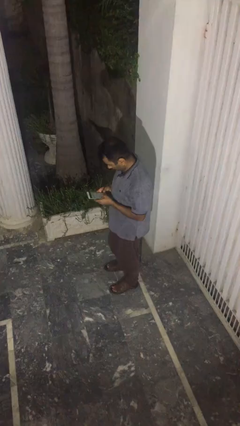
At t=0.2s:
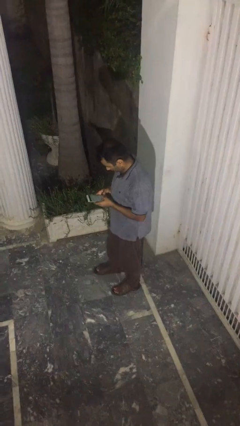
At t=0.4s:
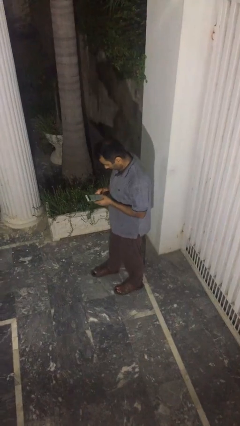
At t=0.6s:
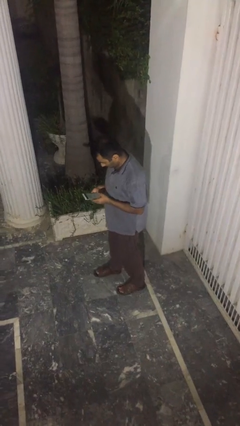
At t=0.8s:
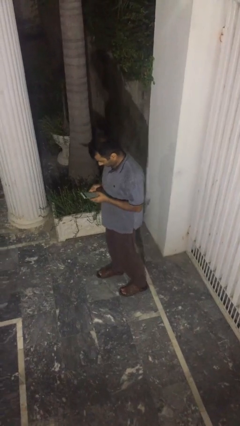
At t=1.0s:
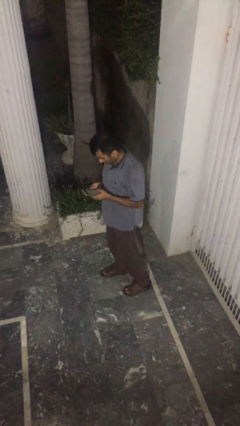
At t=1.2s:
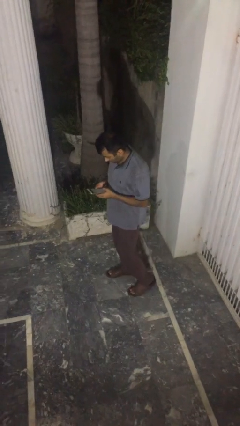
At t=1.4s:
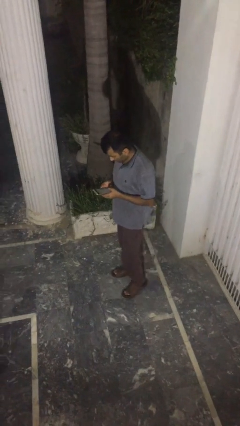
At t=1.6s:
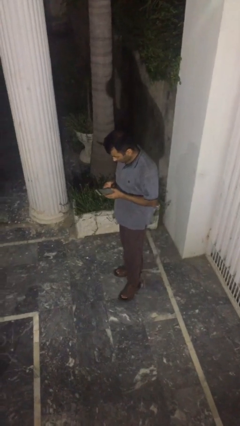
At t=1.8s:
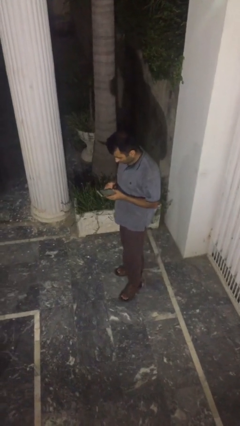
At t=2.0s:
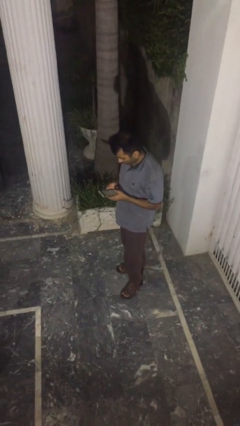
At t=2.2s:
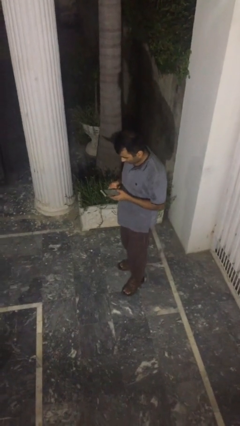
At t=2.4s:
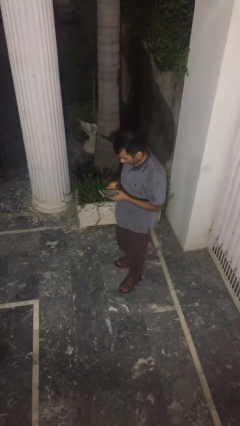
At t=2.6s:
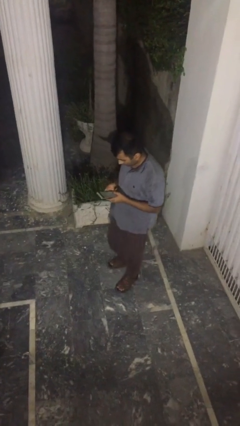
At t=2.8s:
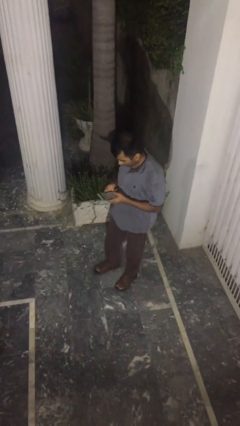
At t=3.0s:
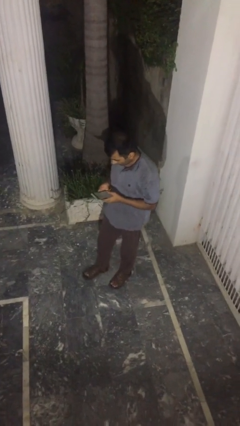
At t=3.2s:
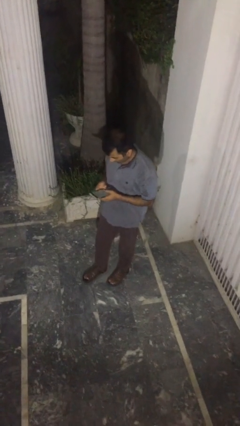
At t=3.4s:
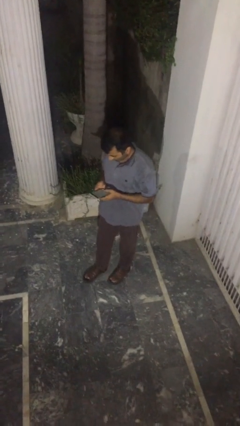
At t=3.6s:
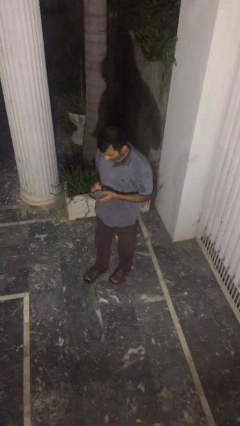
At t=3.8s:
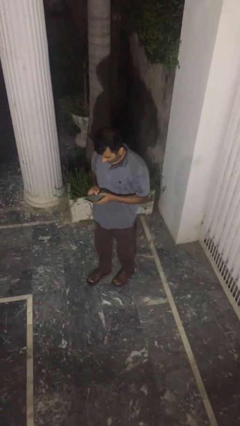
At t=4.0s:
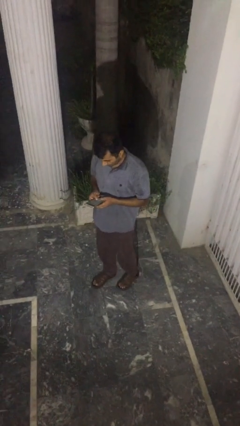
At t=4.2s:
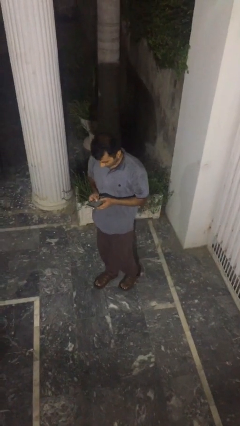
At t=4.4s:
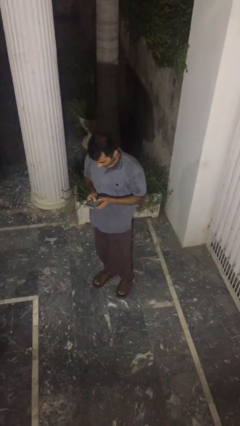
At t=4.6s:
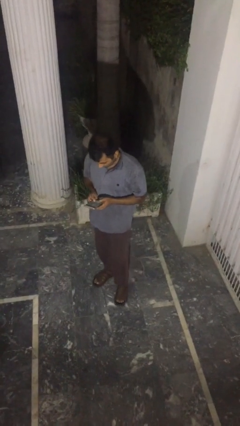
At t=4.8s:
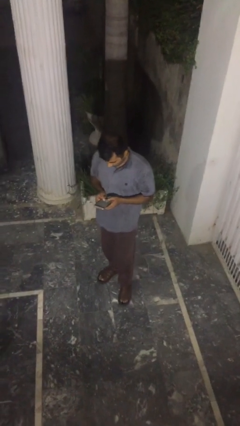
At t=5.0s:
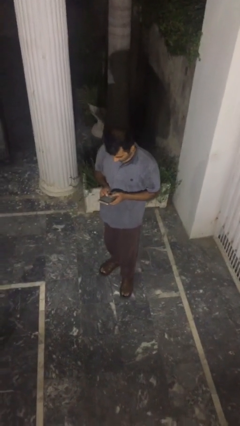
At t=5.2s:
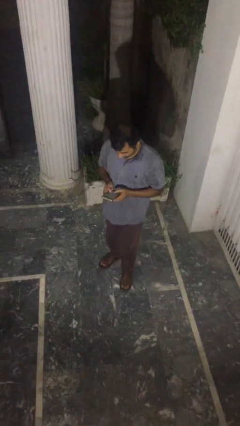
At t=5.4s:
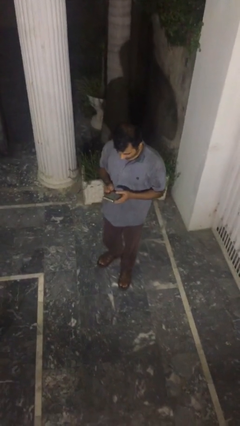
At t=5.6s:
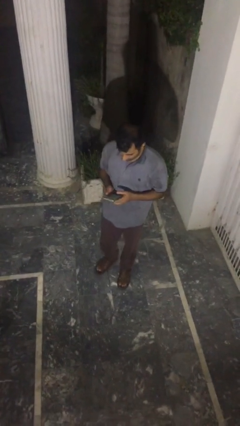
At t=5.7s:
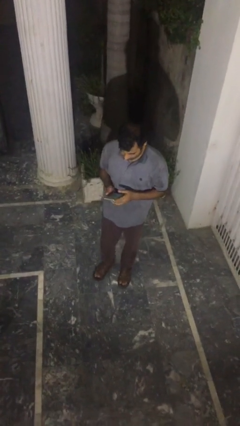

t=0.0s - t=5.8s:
person texts on phone

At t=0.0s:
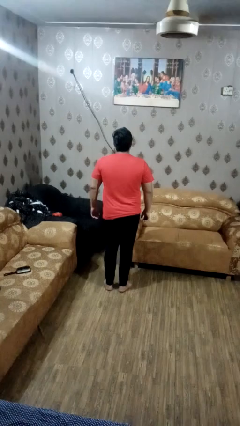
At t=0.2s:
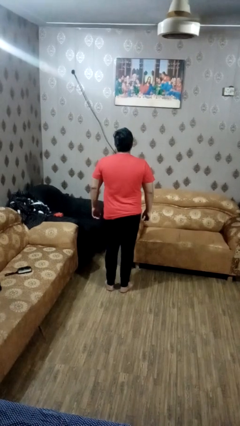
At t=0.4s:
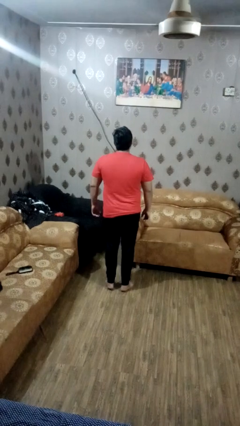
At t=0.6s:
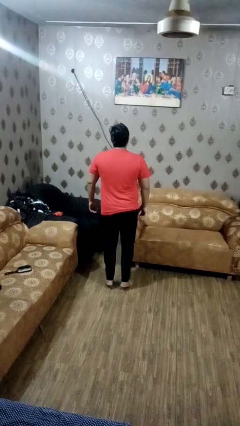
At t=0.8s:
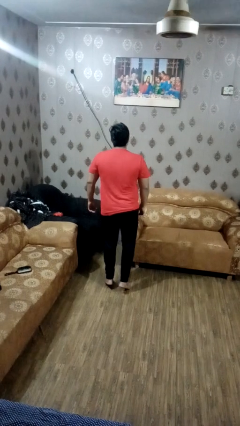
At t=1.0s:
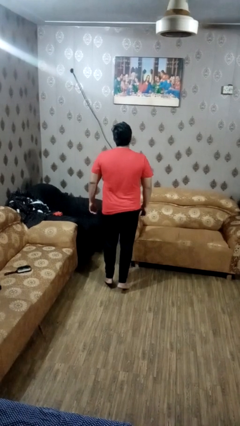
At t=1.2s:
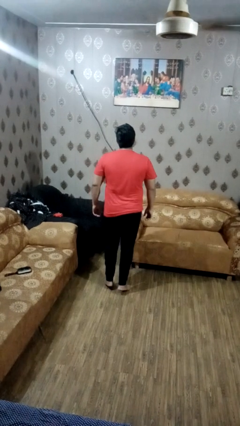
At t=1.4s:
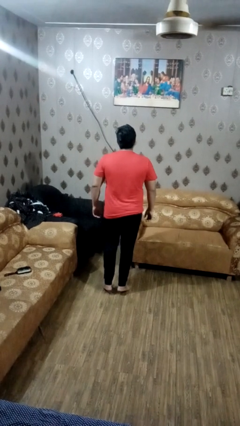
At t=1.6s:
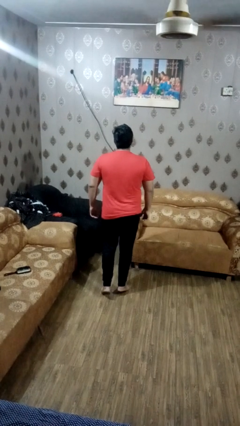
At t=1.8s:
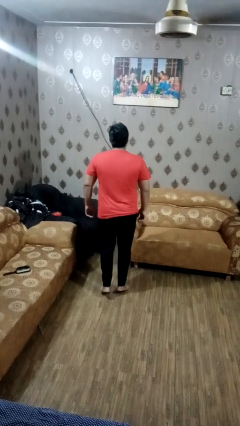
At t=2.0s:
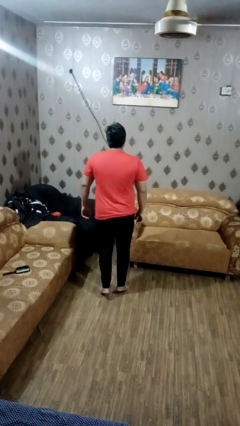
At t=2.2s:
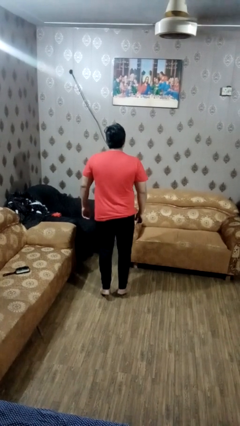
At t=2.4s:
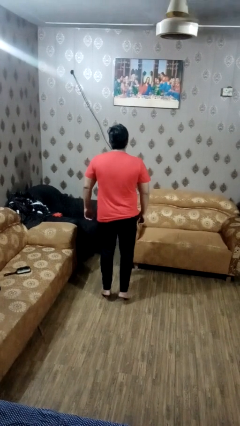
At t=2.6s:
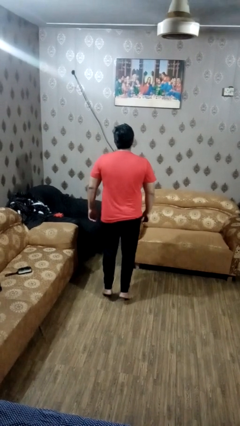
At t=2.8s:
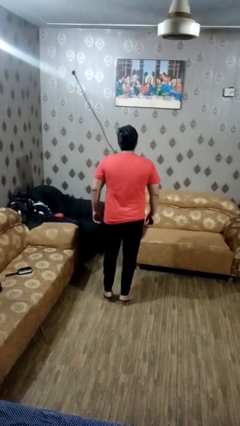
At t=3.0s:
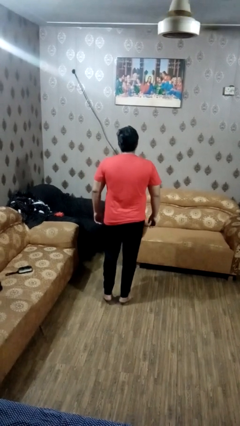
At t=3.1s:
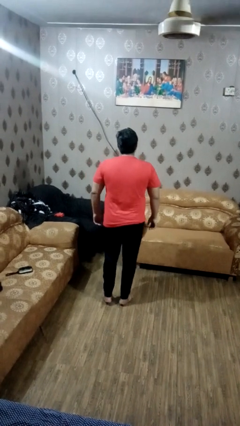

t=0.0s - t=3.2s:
person walks tiptoe

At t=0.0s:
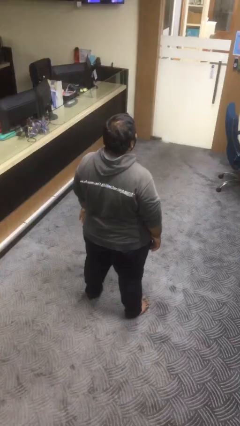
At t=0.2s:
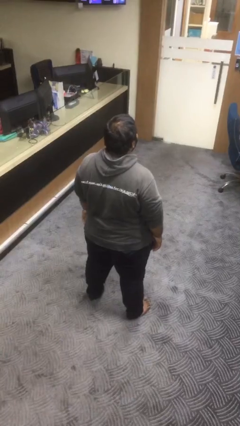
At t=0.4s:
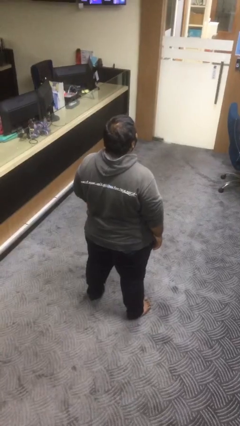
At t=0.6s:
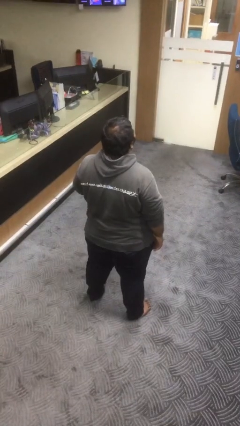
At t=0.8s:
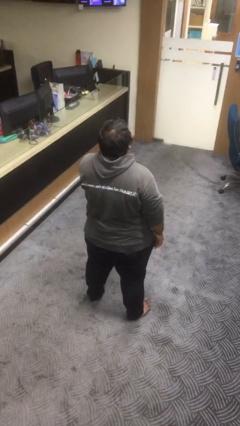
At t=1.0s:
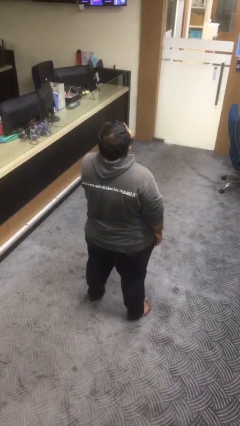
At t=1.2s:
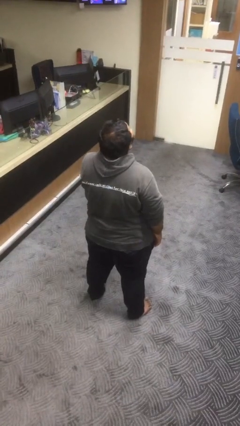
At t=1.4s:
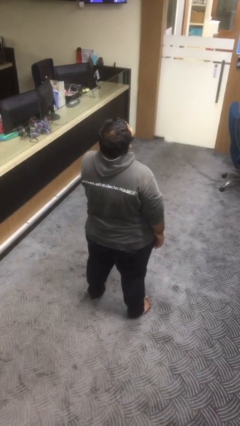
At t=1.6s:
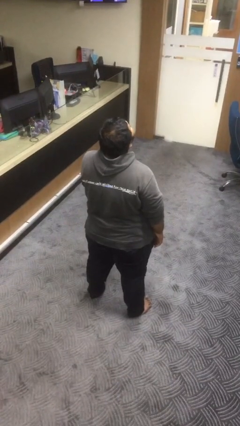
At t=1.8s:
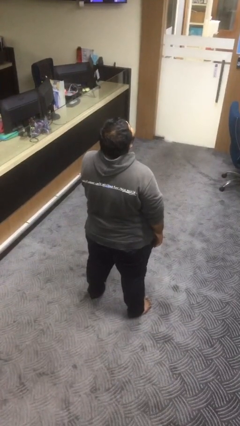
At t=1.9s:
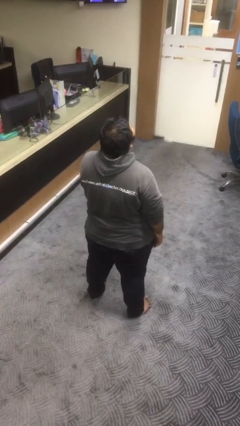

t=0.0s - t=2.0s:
person rubs neck

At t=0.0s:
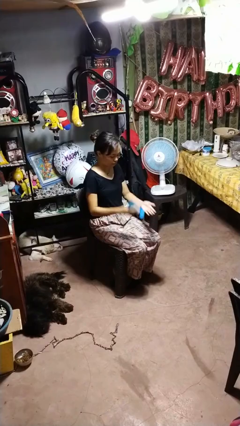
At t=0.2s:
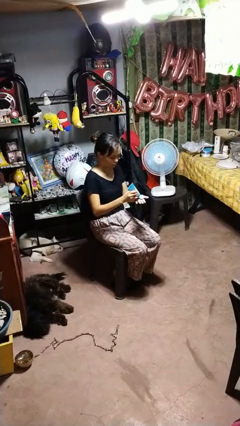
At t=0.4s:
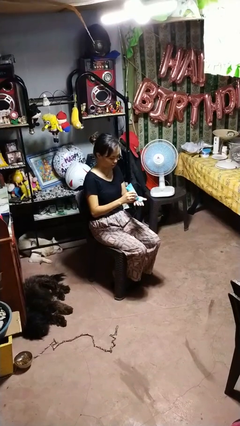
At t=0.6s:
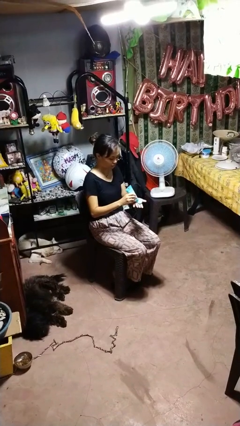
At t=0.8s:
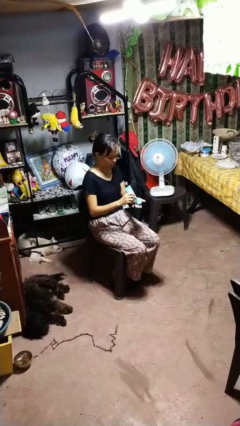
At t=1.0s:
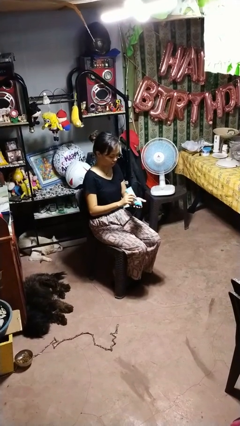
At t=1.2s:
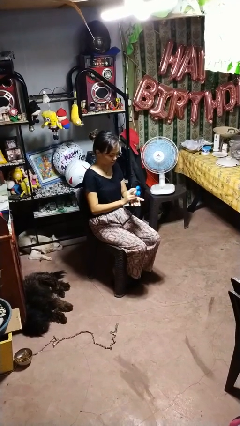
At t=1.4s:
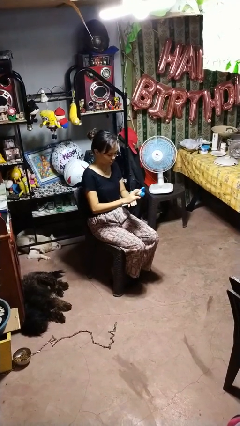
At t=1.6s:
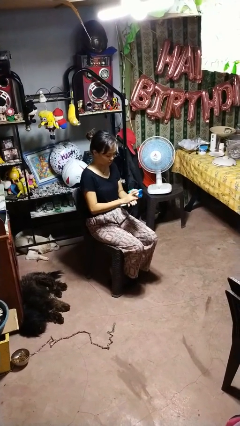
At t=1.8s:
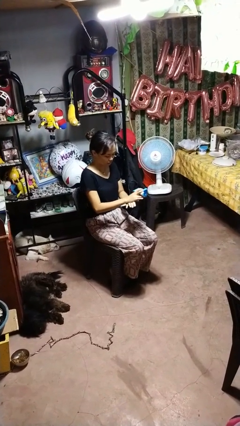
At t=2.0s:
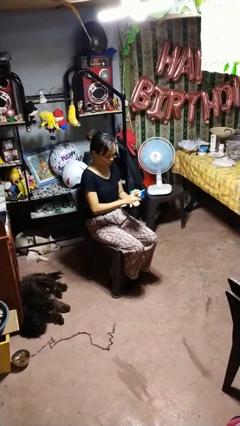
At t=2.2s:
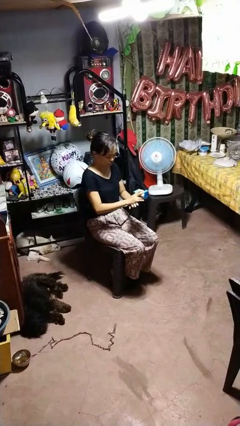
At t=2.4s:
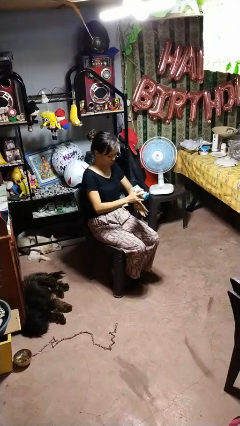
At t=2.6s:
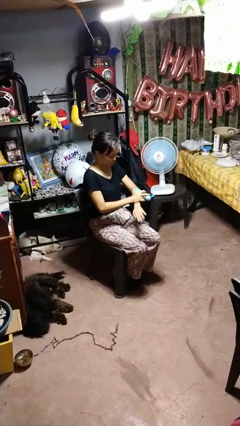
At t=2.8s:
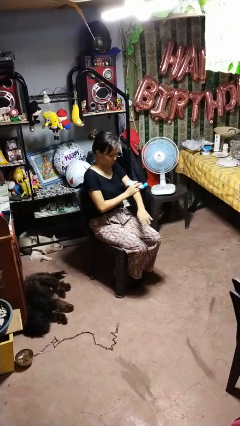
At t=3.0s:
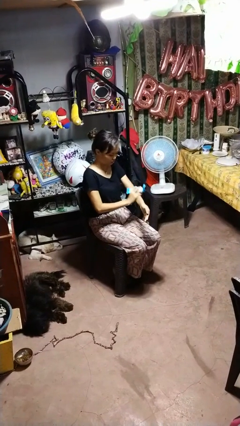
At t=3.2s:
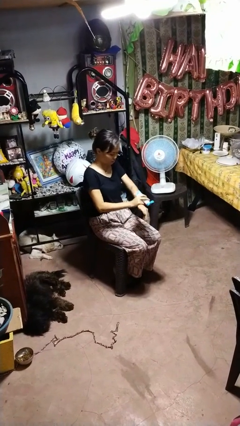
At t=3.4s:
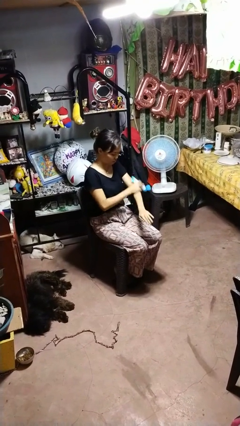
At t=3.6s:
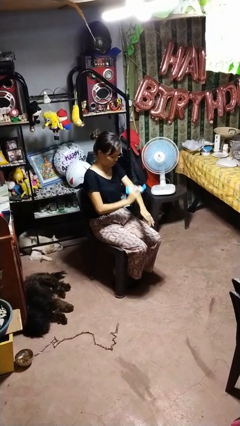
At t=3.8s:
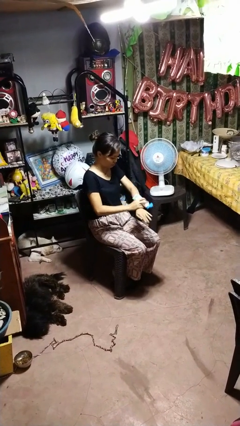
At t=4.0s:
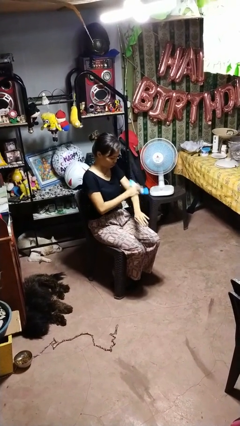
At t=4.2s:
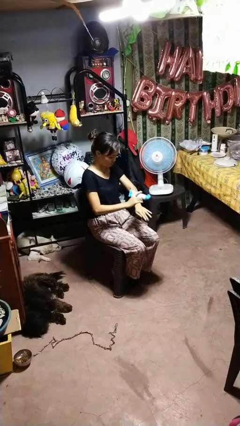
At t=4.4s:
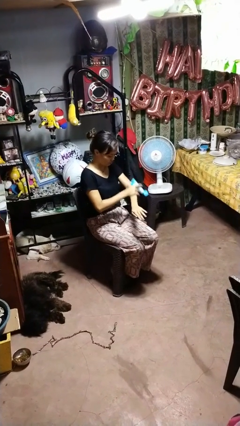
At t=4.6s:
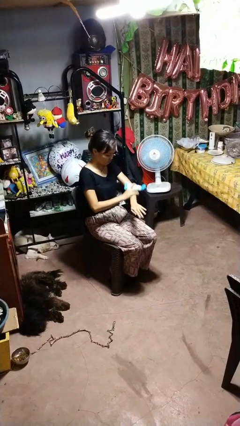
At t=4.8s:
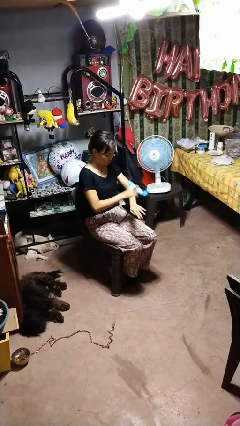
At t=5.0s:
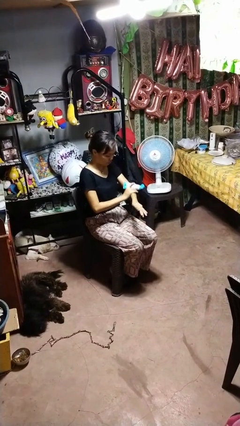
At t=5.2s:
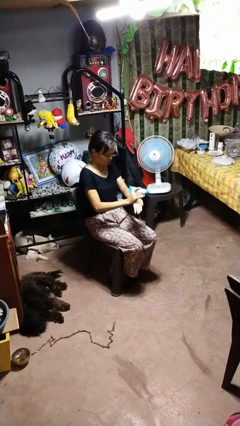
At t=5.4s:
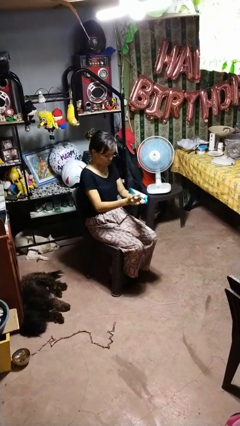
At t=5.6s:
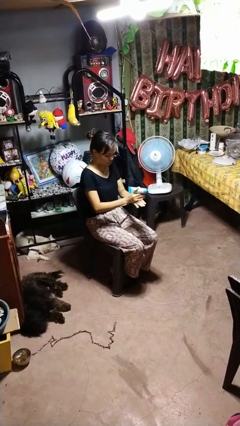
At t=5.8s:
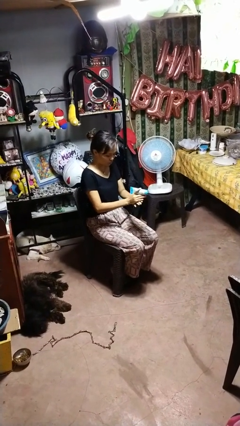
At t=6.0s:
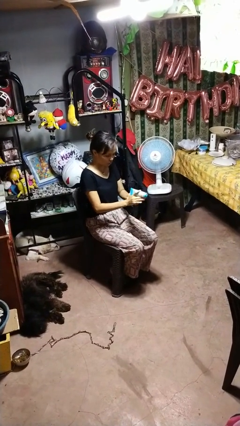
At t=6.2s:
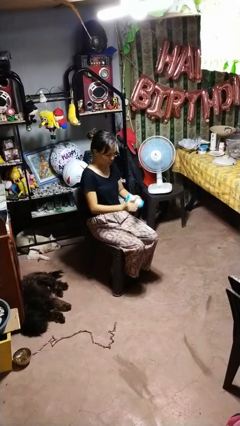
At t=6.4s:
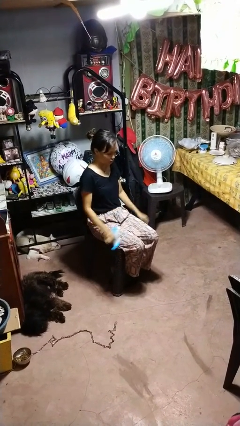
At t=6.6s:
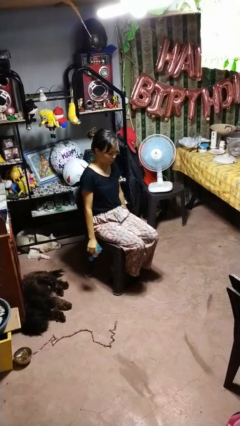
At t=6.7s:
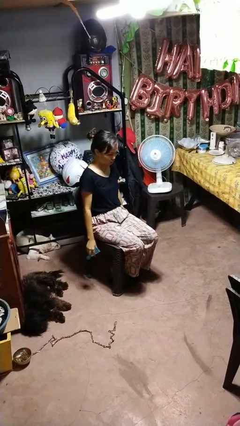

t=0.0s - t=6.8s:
person applies sunscreen
